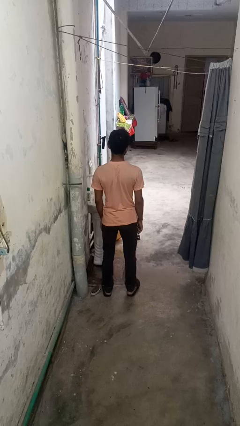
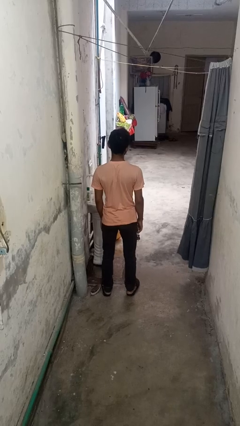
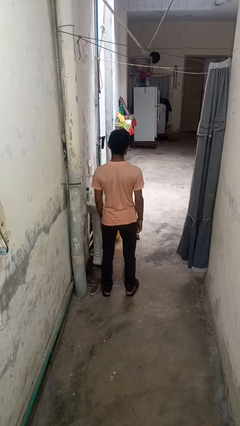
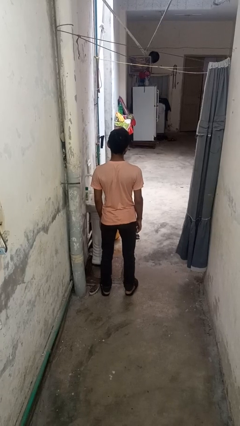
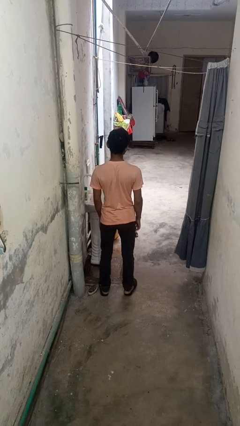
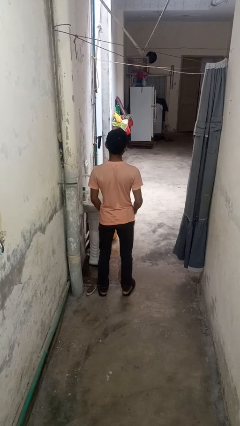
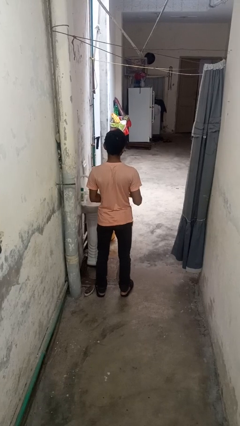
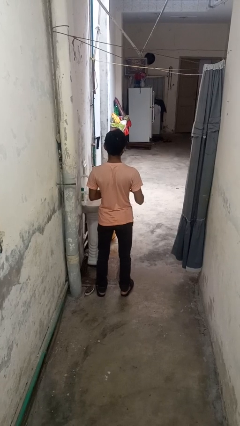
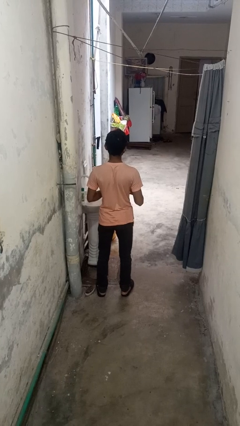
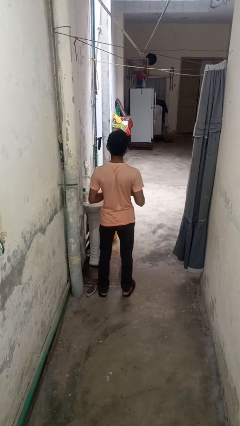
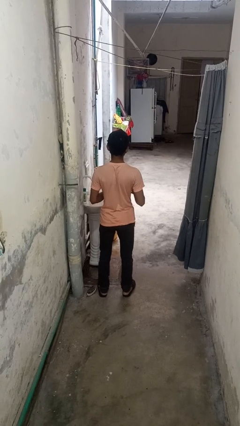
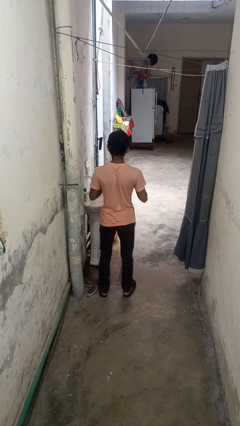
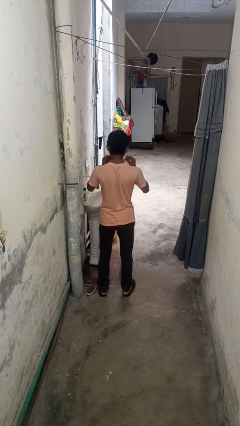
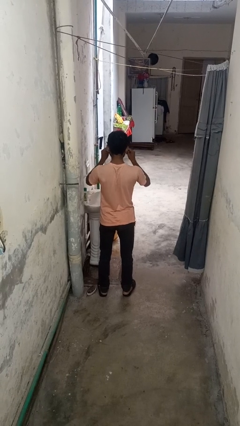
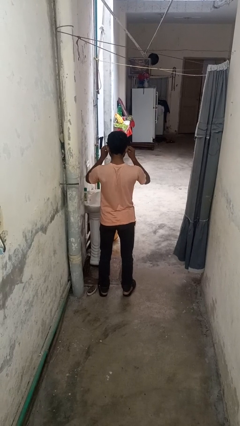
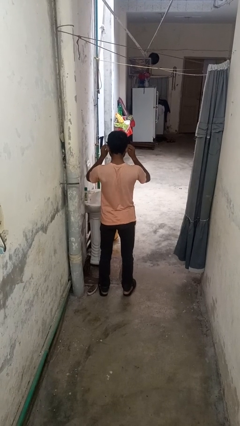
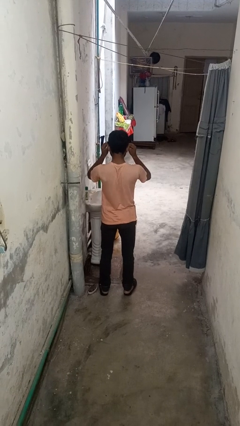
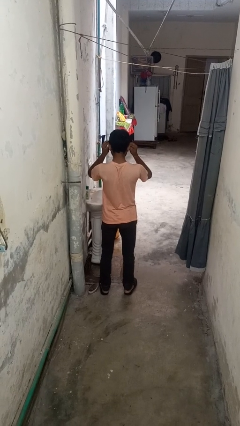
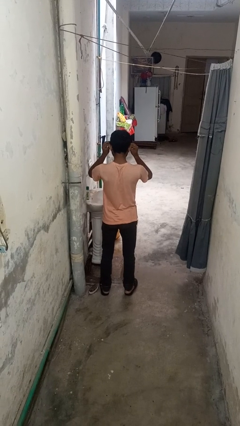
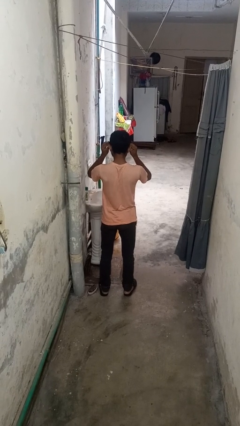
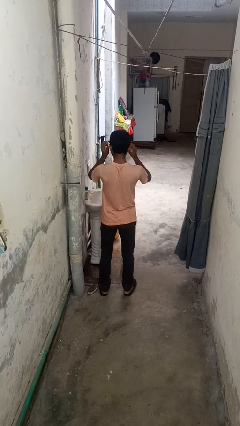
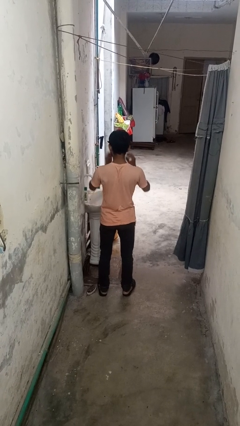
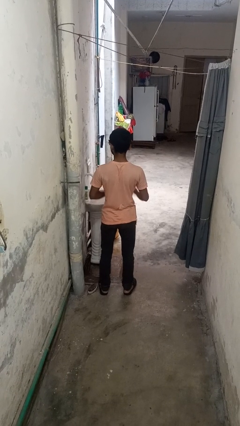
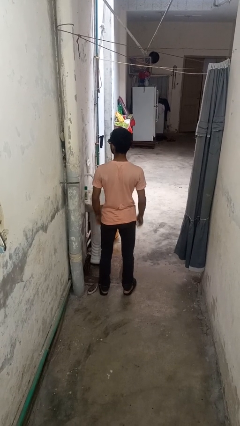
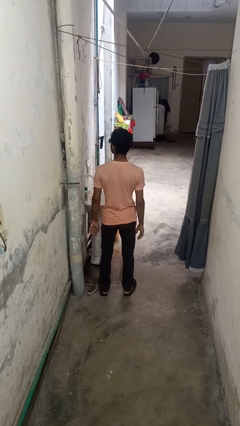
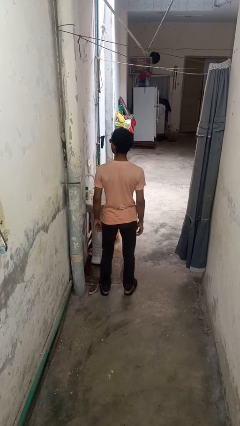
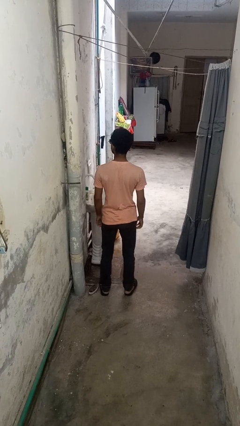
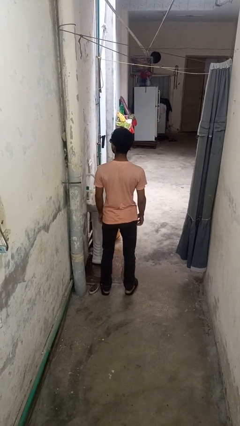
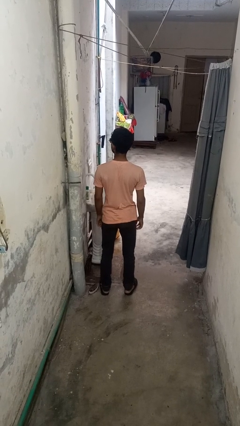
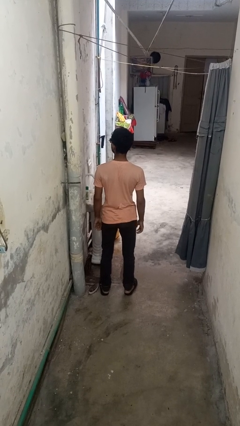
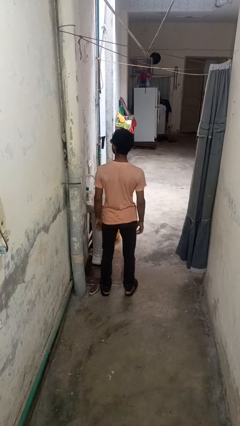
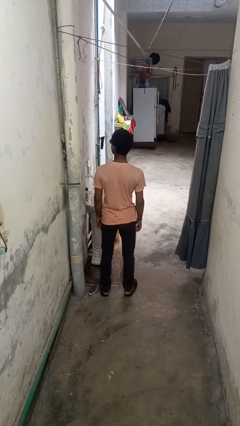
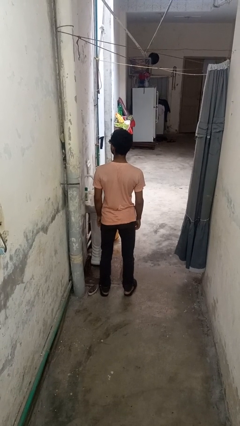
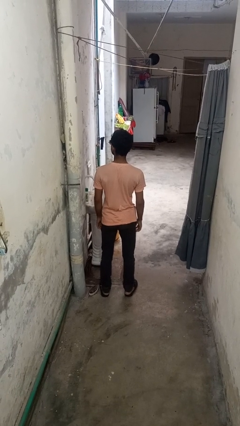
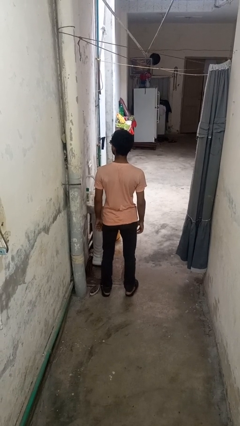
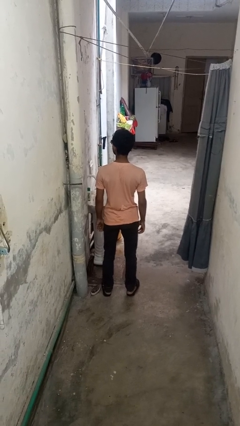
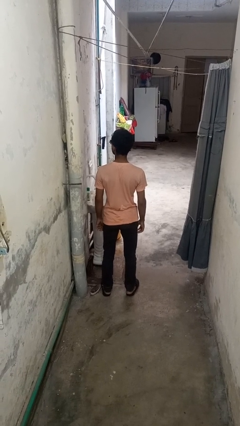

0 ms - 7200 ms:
person puts on sunglasses

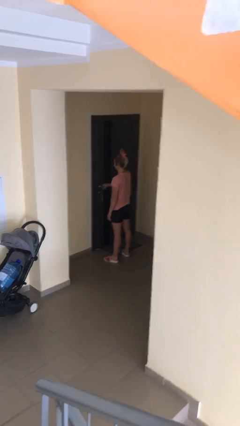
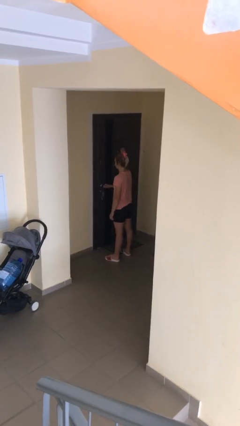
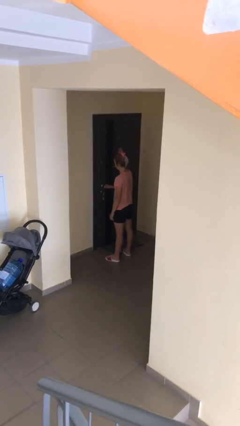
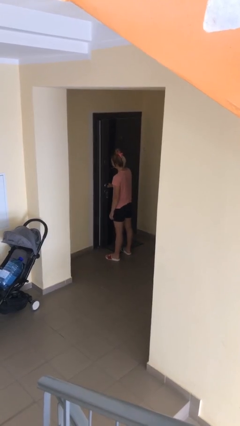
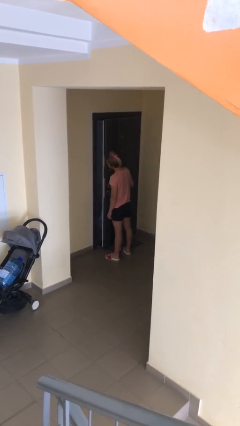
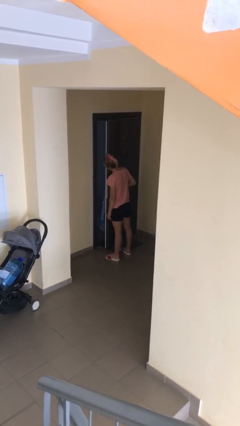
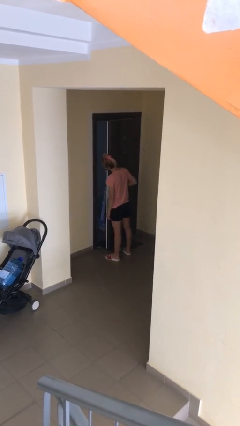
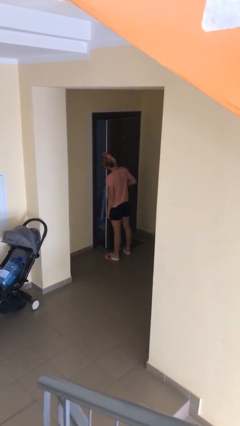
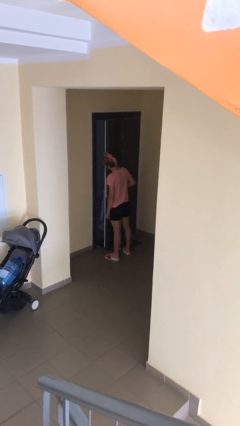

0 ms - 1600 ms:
person opens facility door

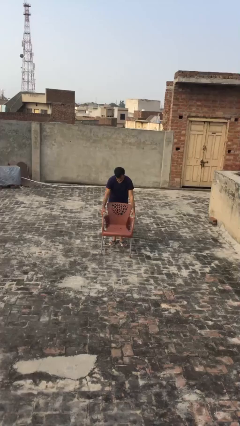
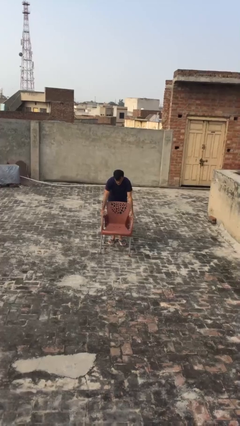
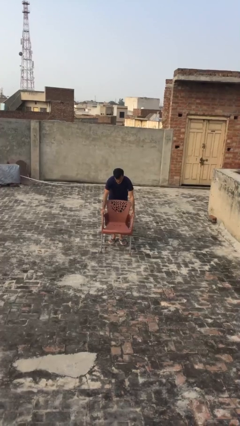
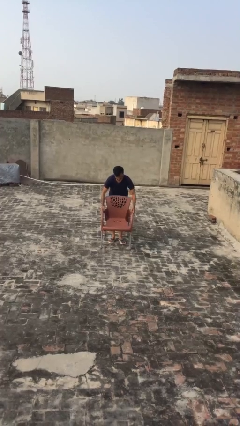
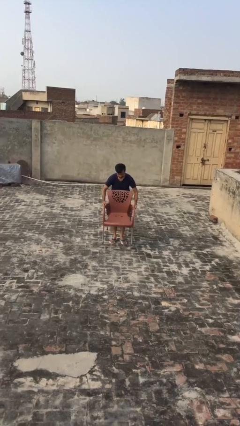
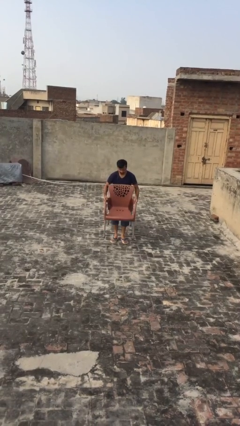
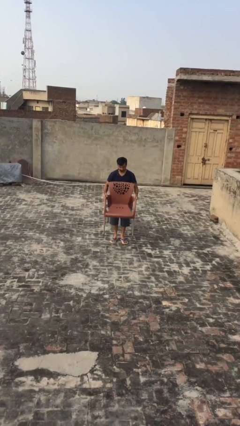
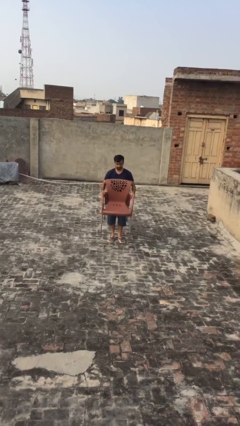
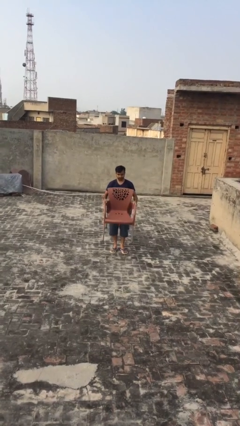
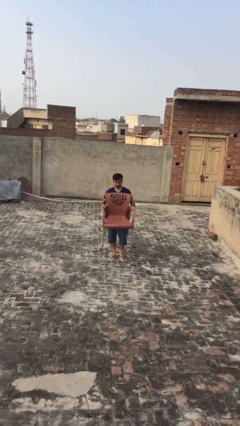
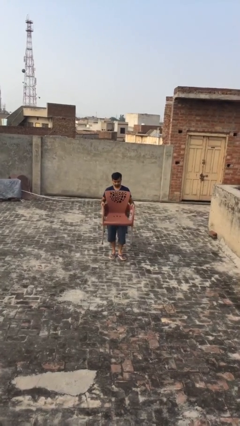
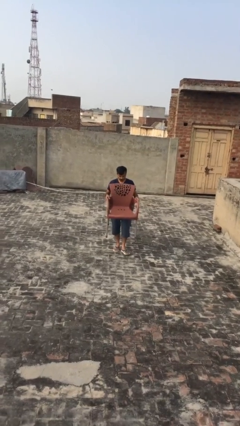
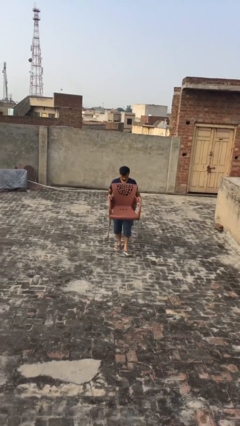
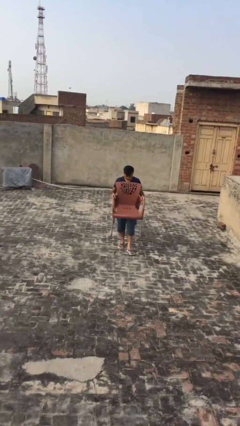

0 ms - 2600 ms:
person picks up object from floor

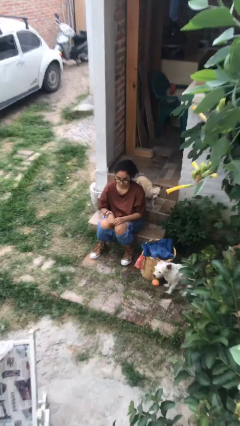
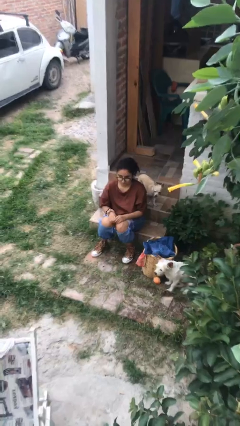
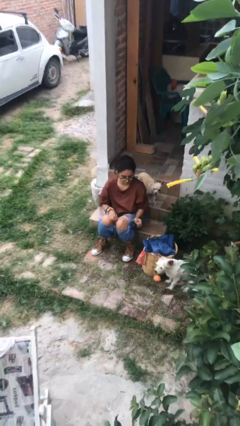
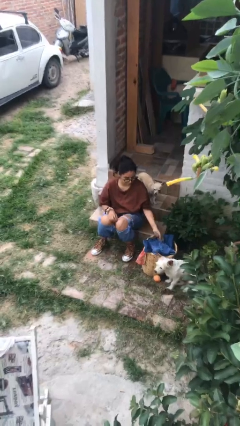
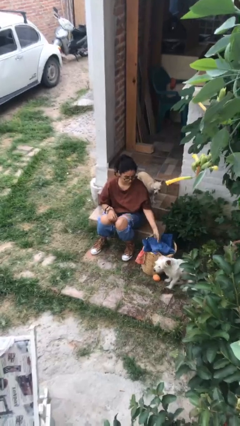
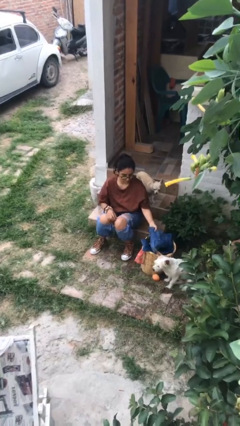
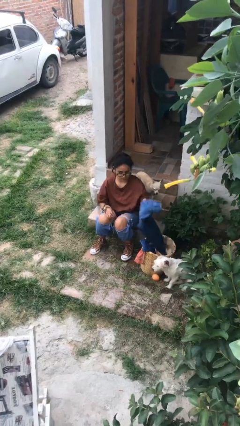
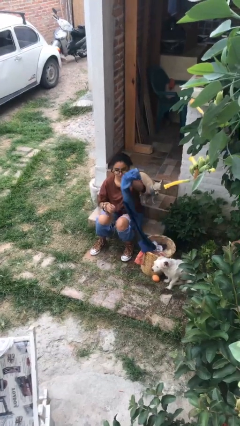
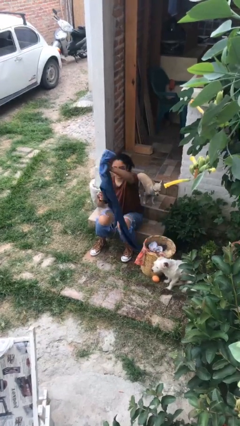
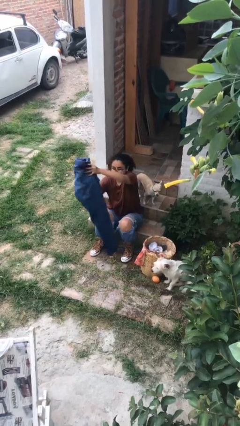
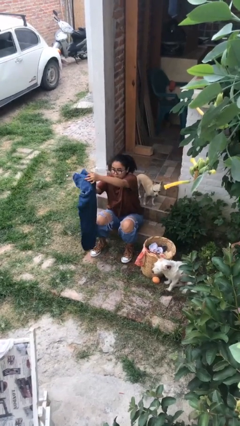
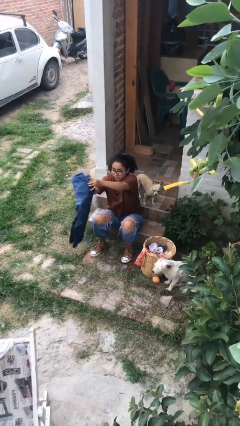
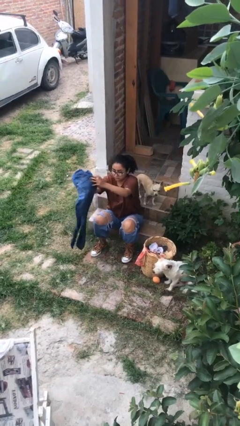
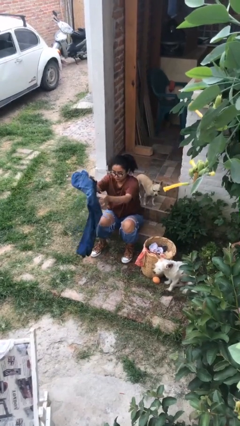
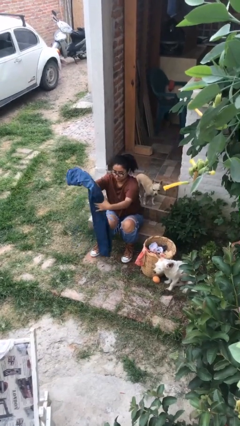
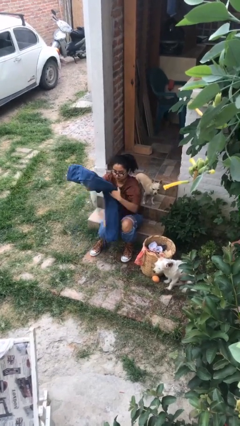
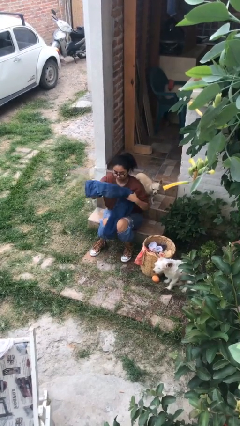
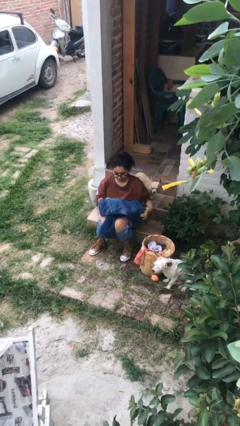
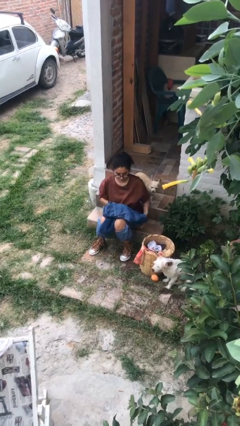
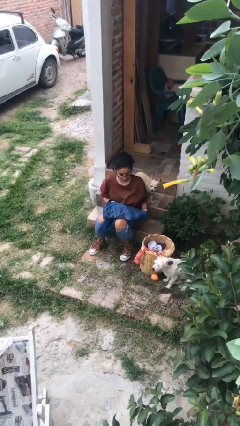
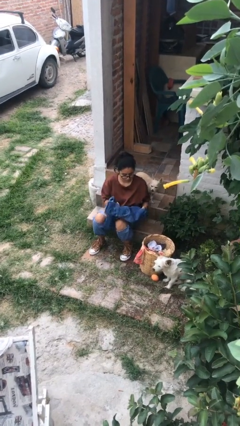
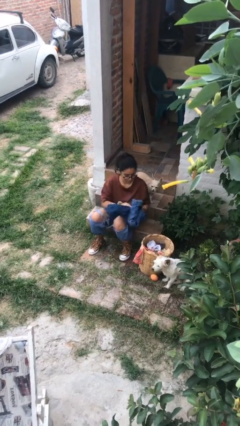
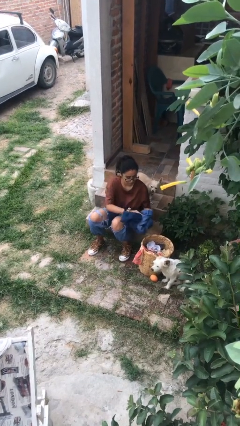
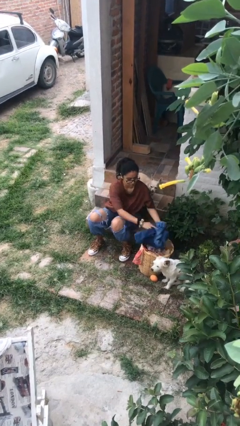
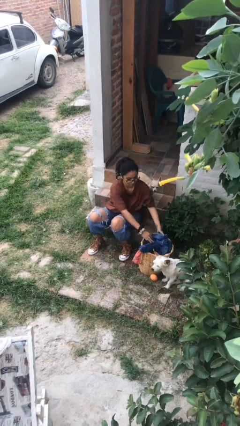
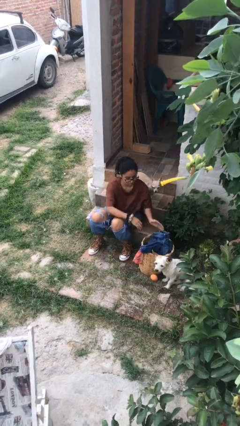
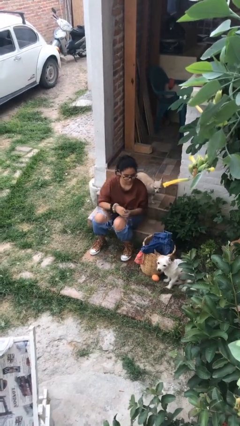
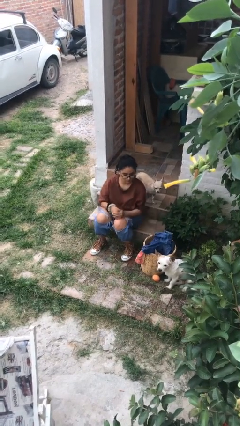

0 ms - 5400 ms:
person folds pants

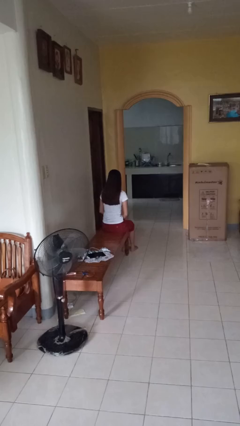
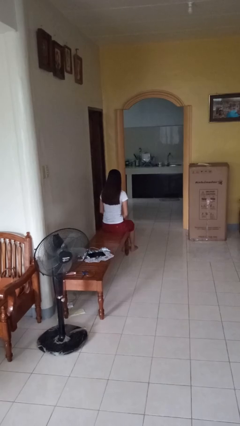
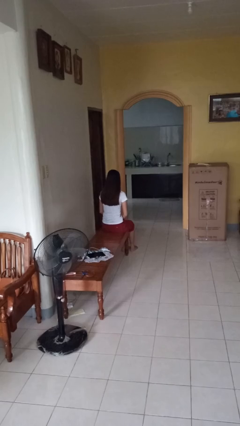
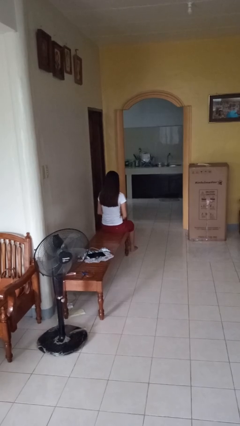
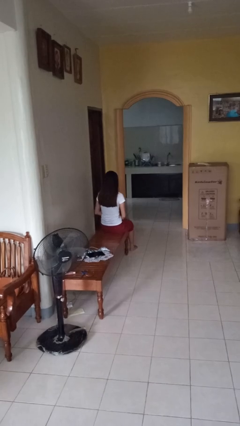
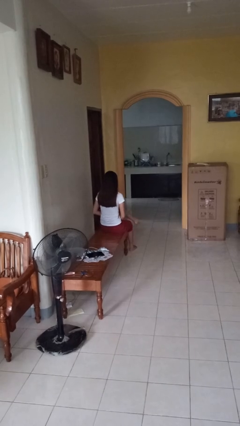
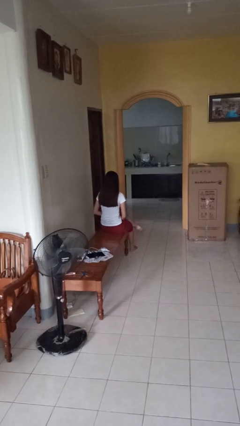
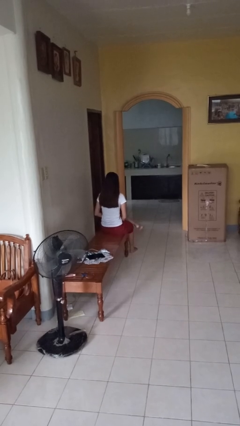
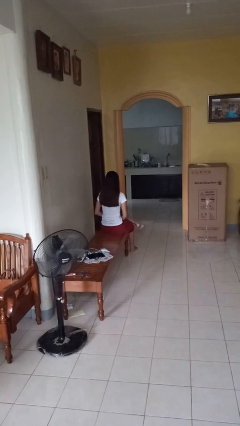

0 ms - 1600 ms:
person crosses legs
